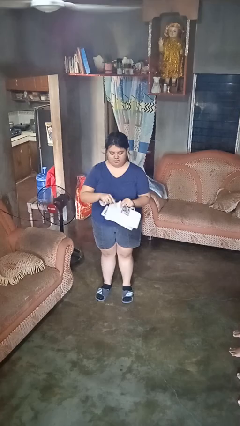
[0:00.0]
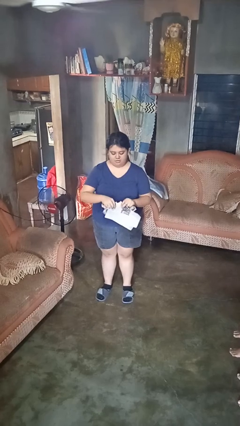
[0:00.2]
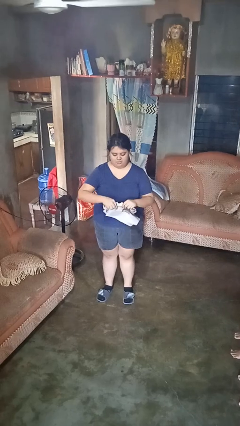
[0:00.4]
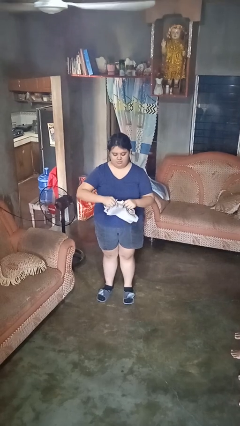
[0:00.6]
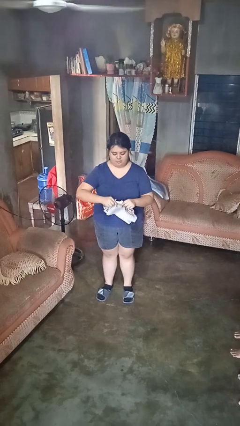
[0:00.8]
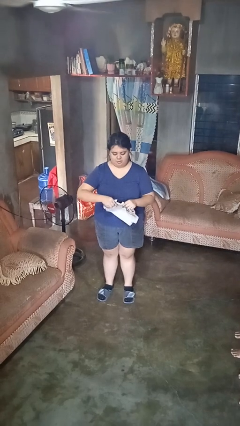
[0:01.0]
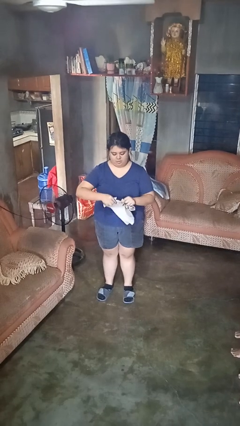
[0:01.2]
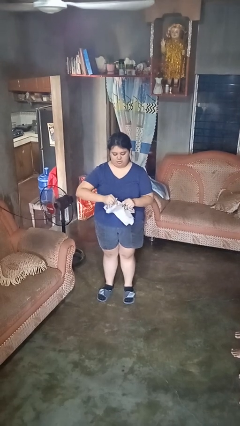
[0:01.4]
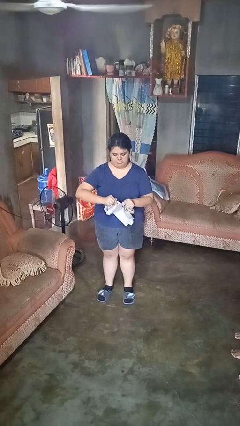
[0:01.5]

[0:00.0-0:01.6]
person tears paper

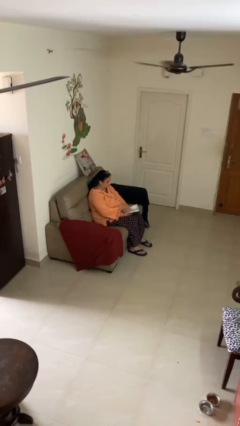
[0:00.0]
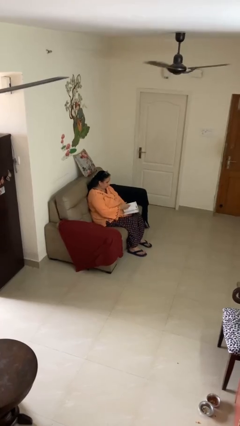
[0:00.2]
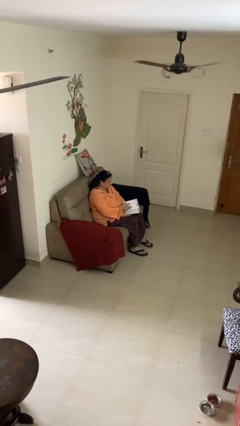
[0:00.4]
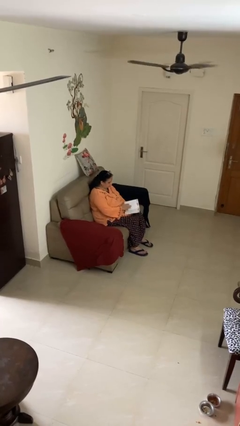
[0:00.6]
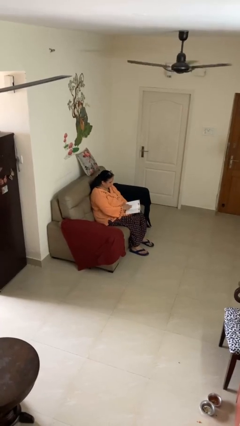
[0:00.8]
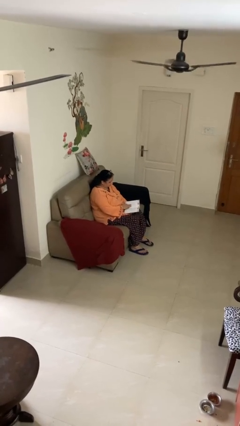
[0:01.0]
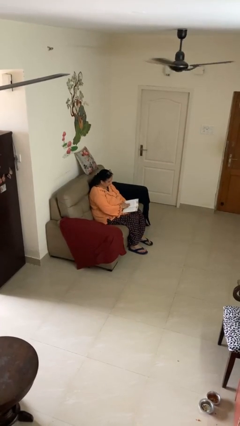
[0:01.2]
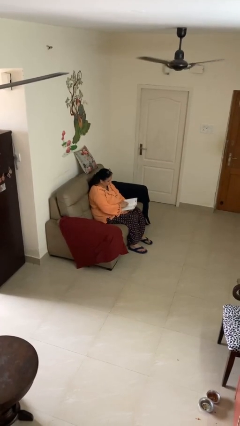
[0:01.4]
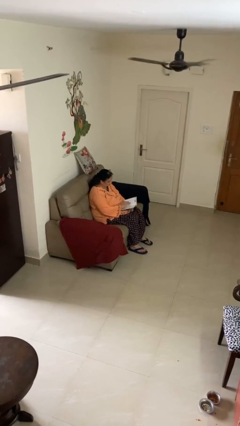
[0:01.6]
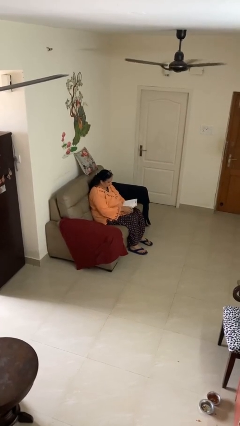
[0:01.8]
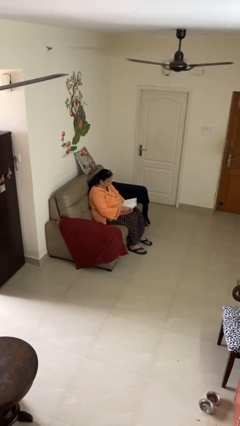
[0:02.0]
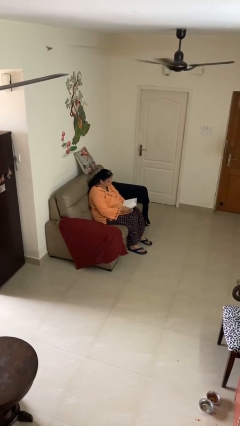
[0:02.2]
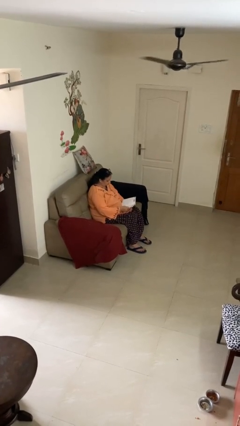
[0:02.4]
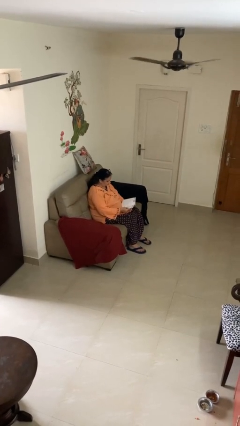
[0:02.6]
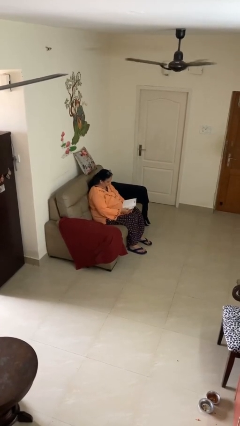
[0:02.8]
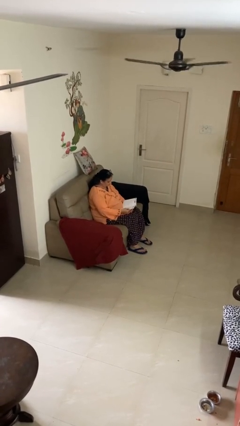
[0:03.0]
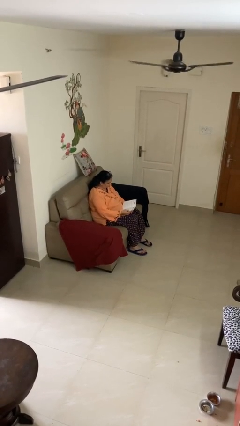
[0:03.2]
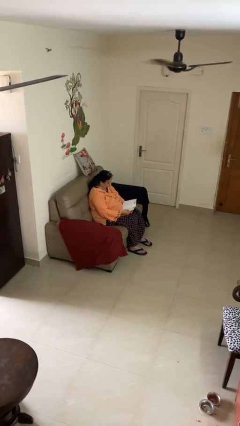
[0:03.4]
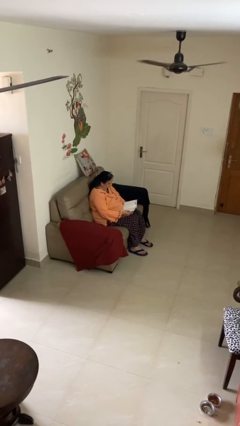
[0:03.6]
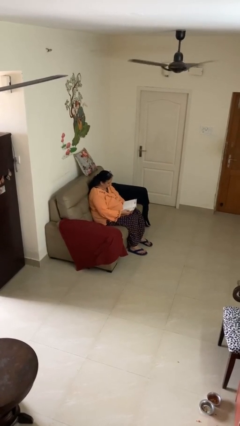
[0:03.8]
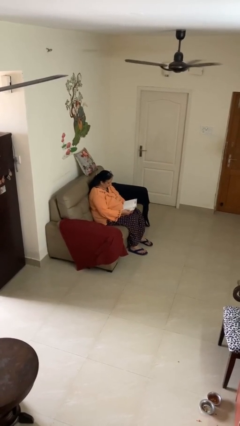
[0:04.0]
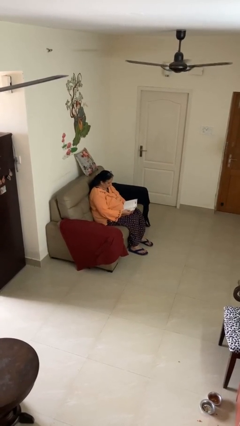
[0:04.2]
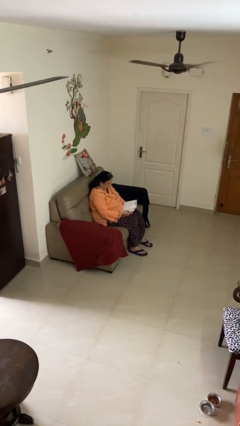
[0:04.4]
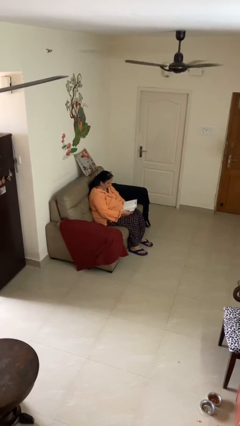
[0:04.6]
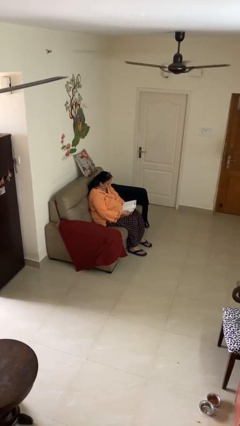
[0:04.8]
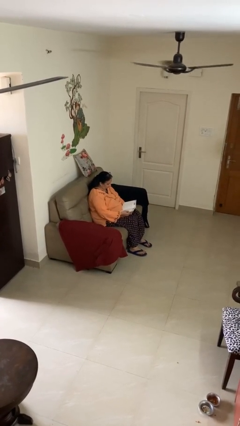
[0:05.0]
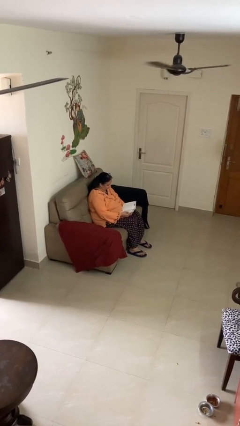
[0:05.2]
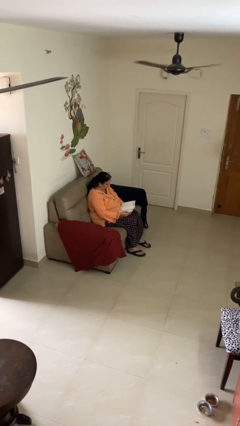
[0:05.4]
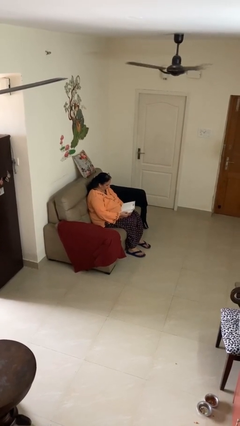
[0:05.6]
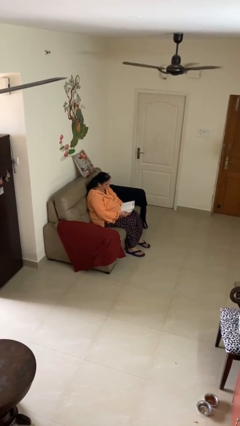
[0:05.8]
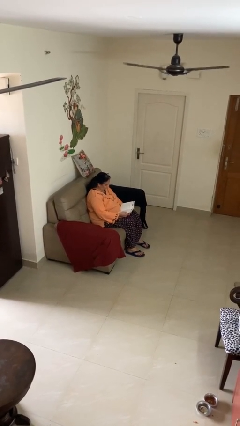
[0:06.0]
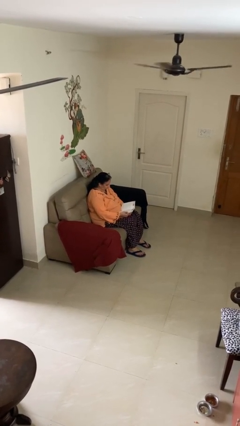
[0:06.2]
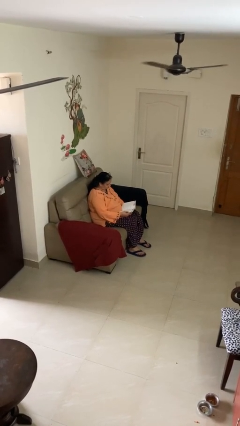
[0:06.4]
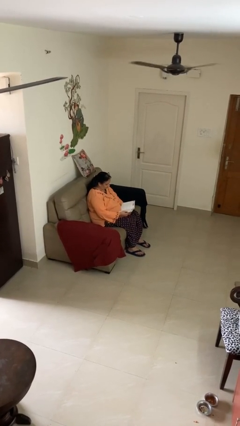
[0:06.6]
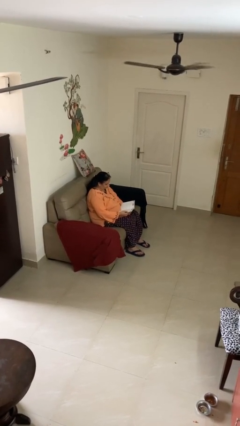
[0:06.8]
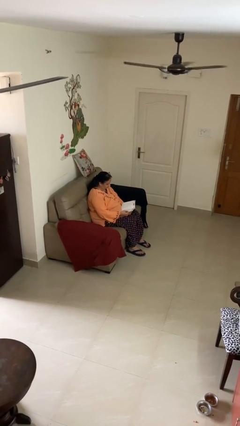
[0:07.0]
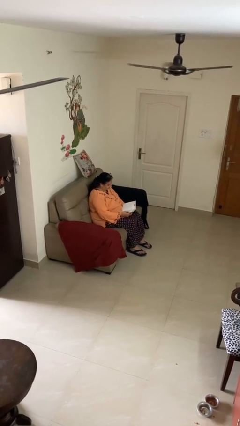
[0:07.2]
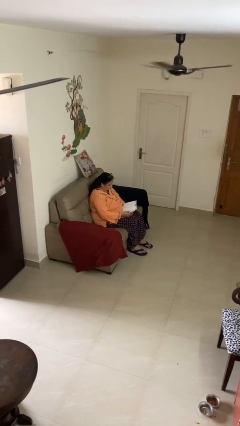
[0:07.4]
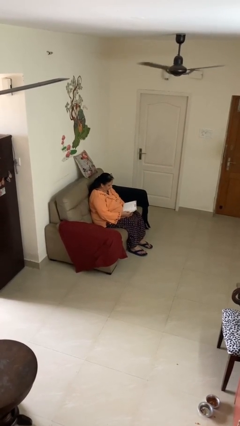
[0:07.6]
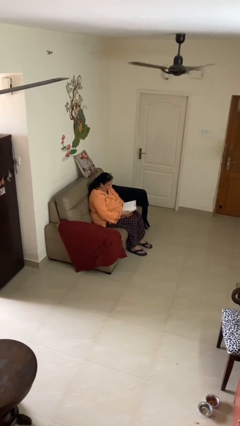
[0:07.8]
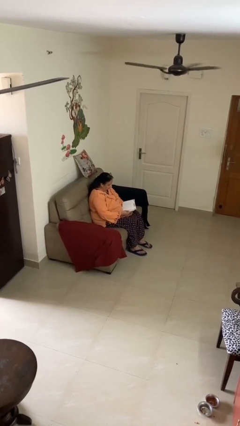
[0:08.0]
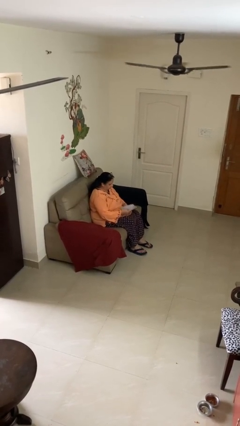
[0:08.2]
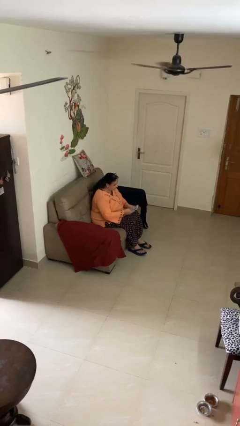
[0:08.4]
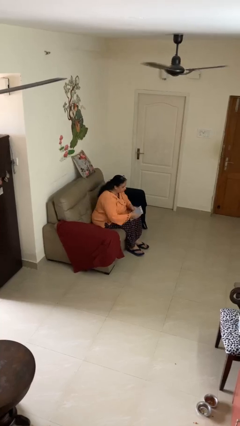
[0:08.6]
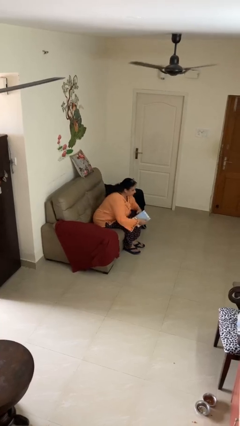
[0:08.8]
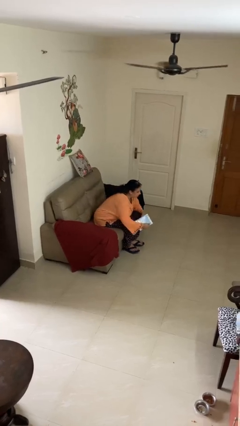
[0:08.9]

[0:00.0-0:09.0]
person reads document

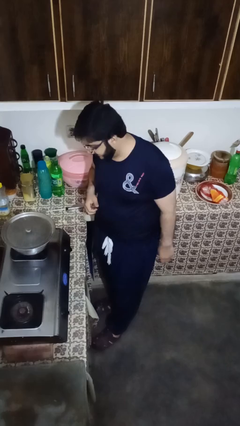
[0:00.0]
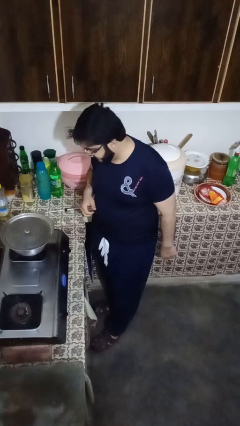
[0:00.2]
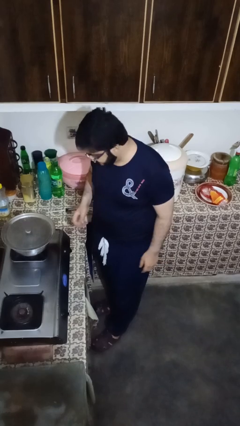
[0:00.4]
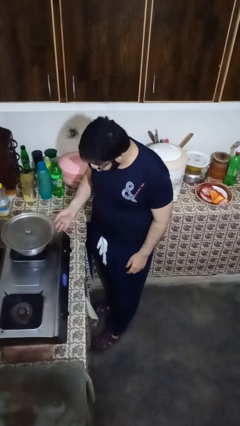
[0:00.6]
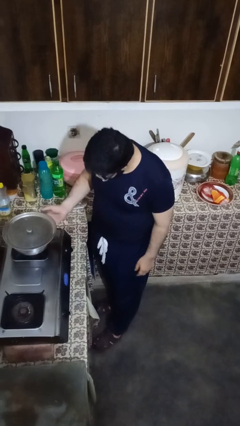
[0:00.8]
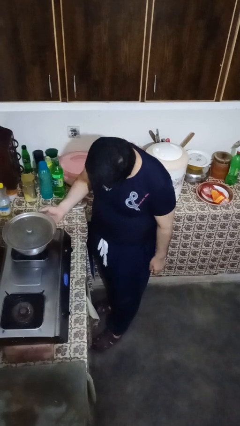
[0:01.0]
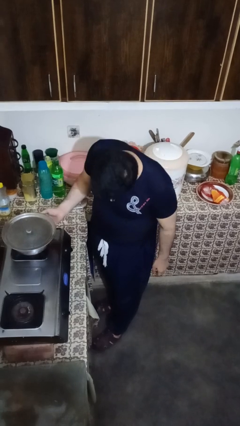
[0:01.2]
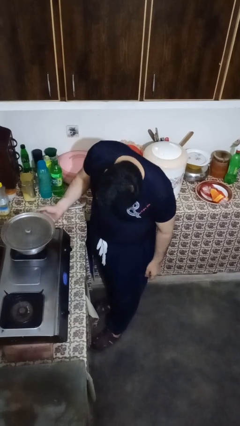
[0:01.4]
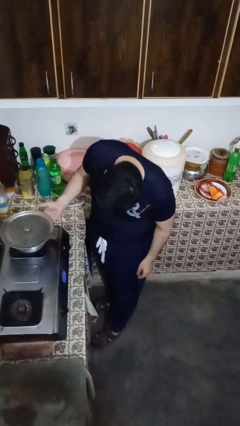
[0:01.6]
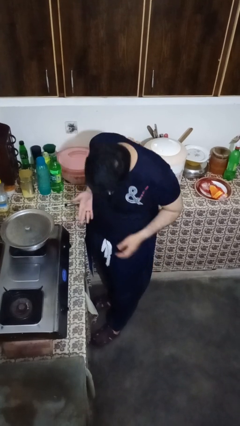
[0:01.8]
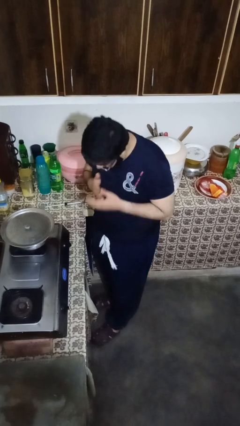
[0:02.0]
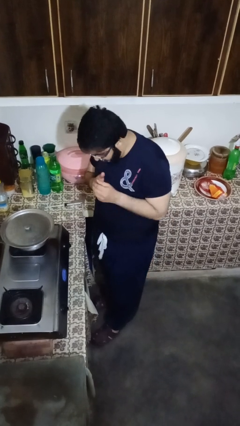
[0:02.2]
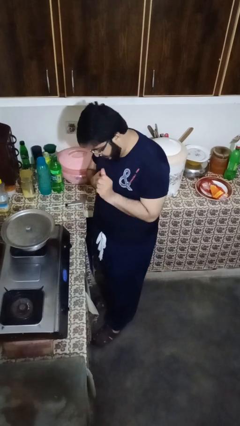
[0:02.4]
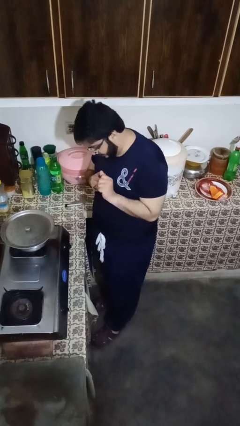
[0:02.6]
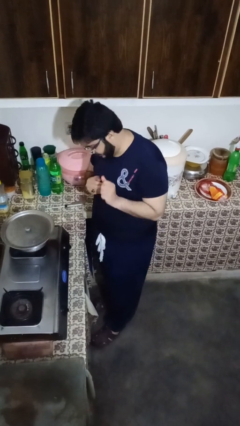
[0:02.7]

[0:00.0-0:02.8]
person burns hand

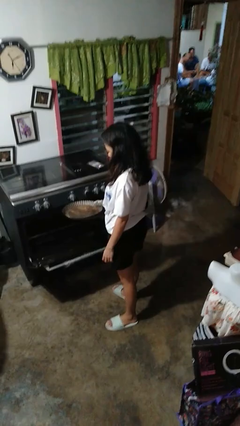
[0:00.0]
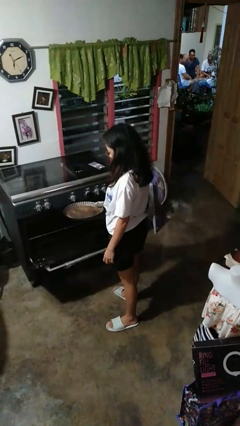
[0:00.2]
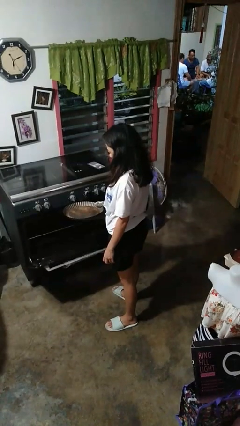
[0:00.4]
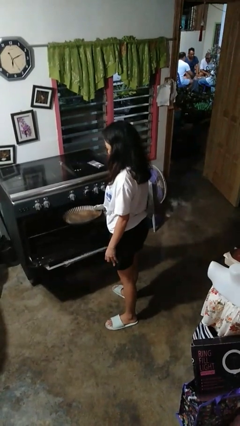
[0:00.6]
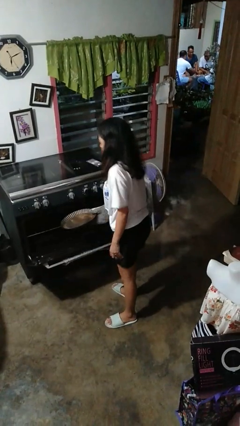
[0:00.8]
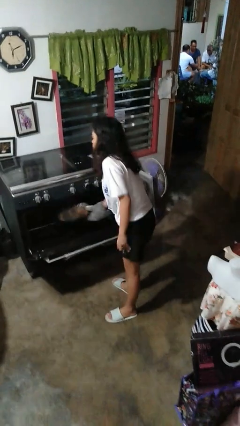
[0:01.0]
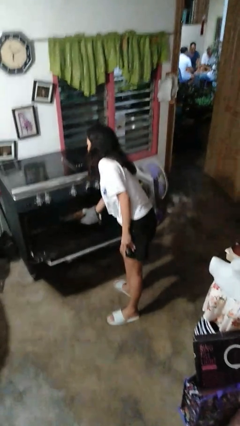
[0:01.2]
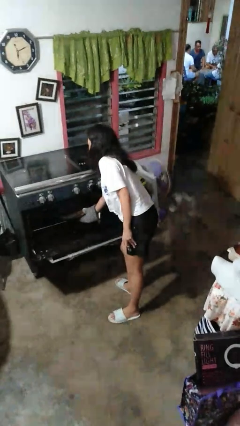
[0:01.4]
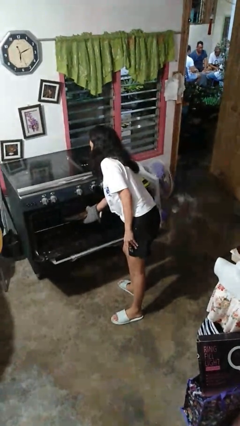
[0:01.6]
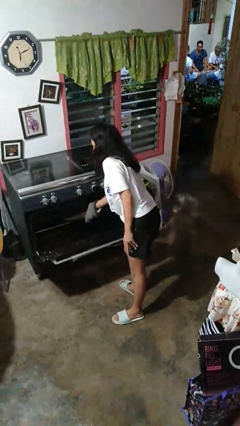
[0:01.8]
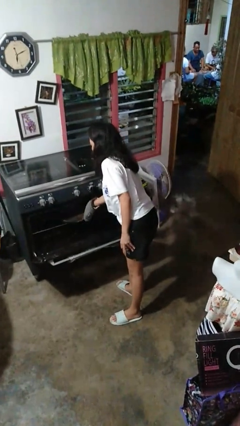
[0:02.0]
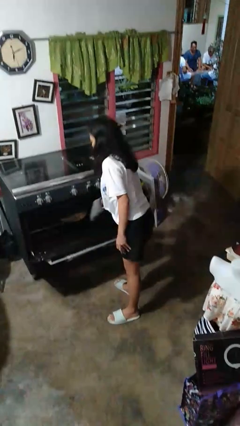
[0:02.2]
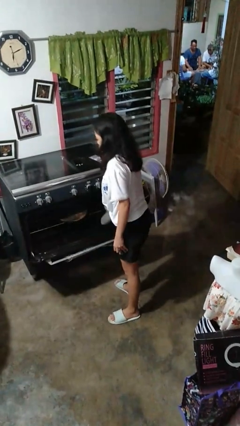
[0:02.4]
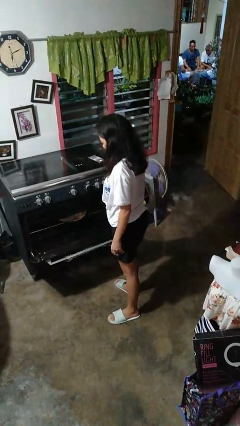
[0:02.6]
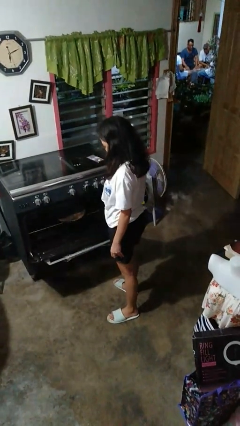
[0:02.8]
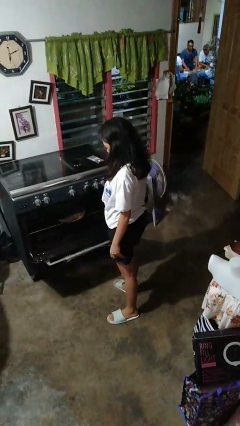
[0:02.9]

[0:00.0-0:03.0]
person puts object into oven

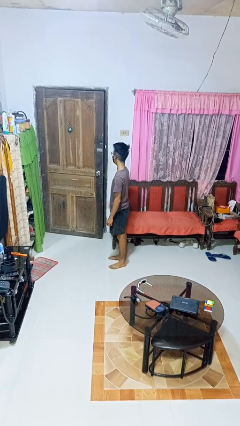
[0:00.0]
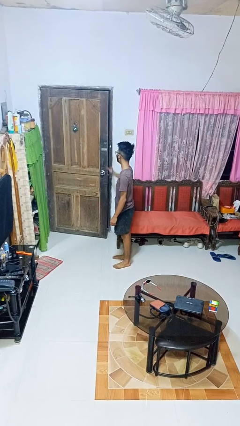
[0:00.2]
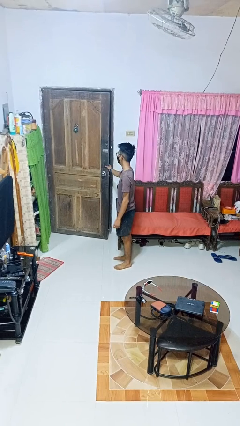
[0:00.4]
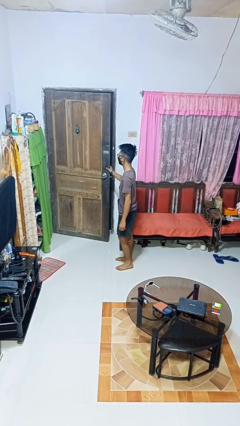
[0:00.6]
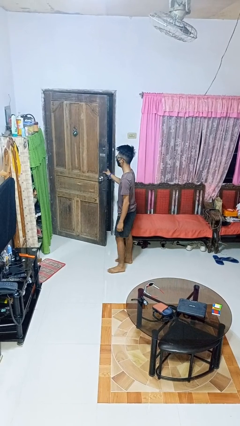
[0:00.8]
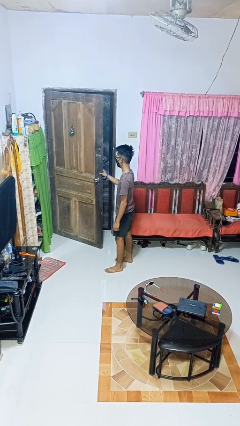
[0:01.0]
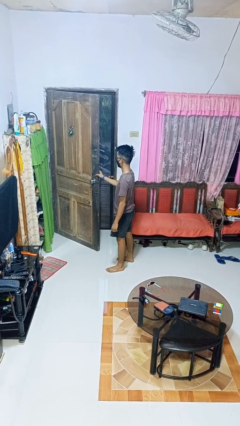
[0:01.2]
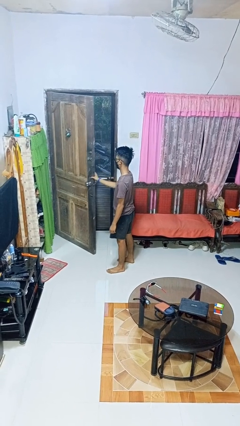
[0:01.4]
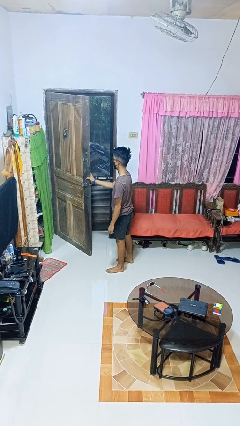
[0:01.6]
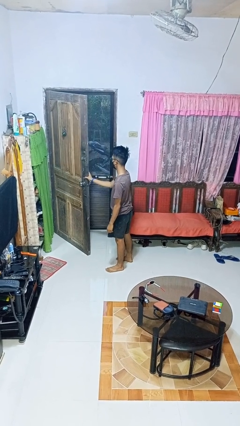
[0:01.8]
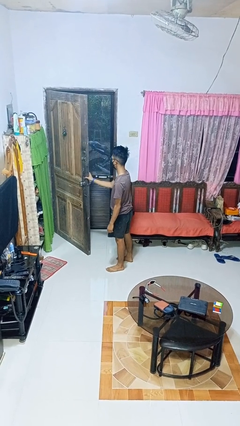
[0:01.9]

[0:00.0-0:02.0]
person opens facility door
